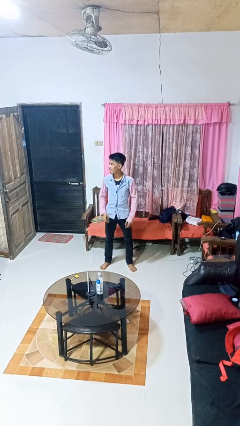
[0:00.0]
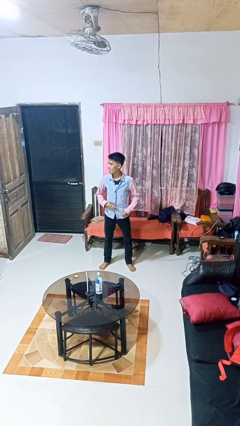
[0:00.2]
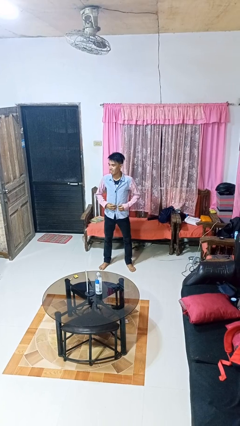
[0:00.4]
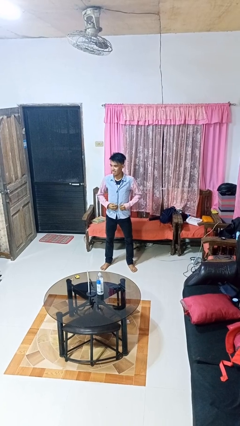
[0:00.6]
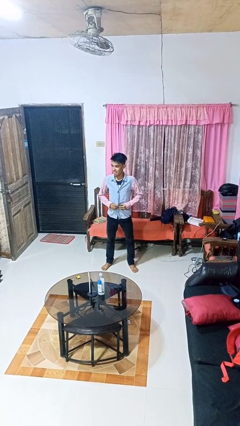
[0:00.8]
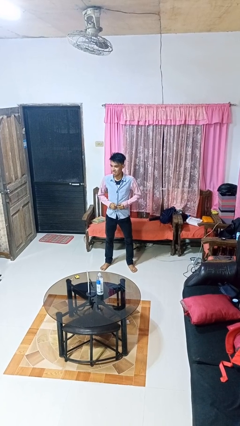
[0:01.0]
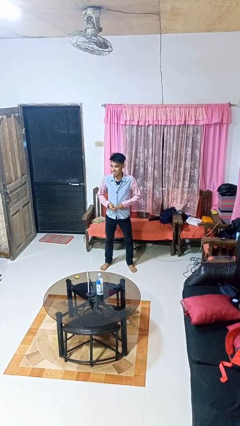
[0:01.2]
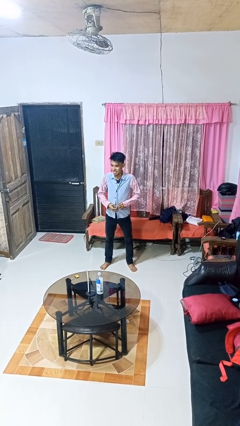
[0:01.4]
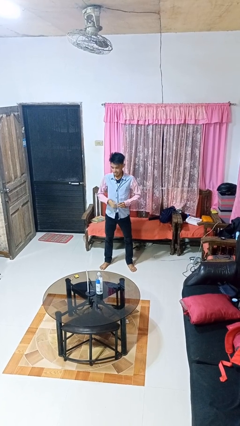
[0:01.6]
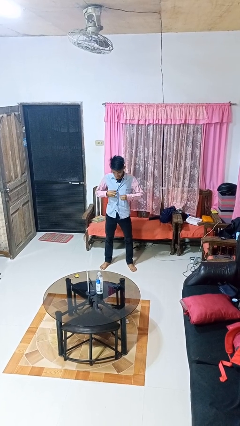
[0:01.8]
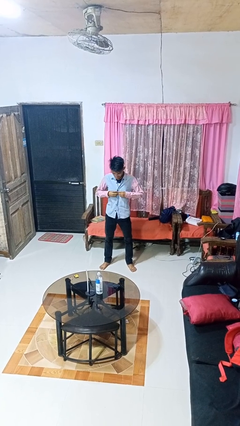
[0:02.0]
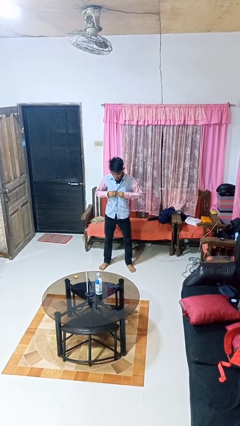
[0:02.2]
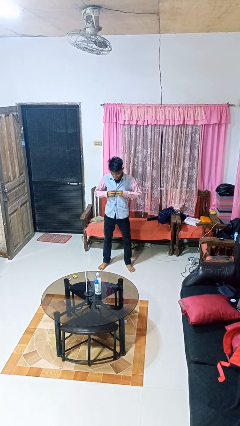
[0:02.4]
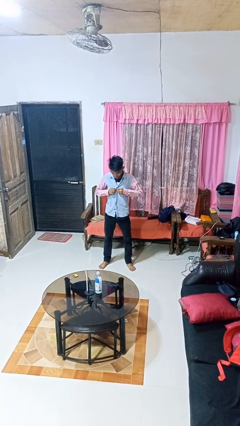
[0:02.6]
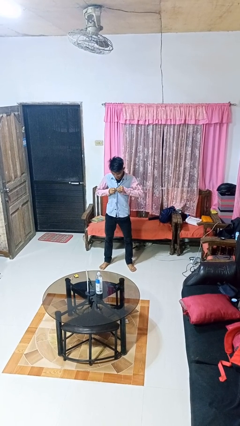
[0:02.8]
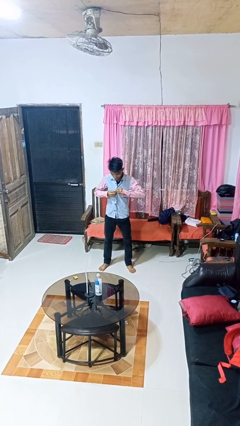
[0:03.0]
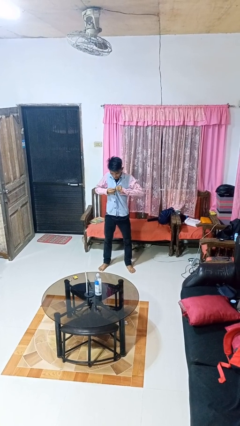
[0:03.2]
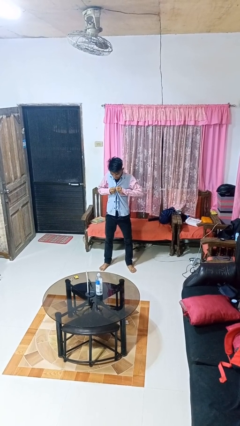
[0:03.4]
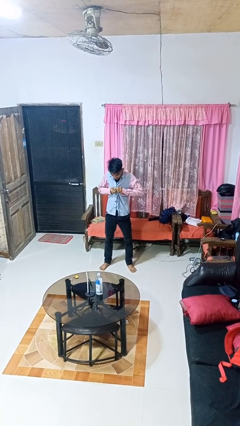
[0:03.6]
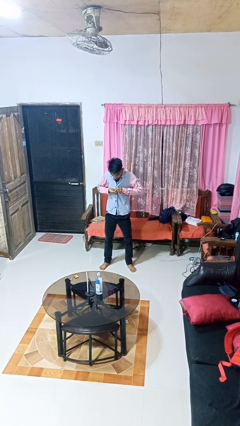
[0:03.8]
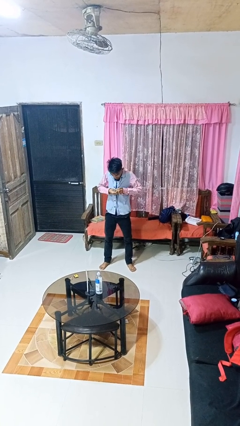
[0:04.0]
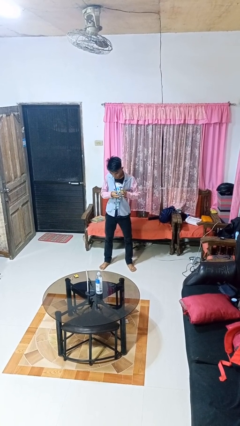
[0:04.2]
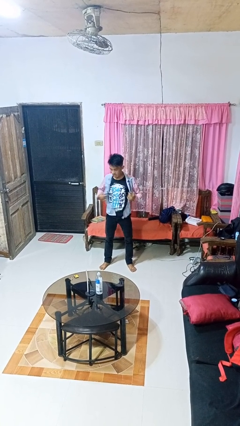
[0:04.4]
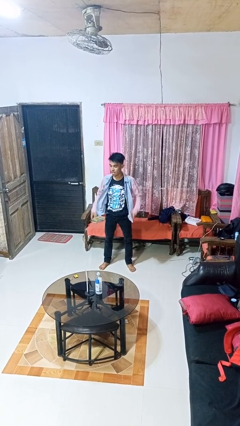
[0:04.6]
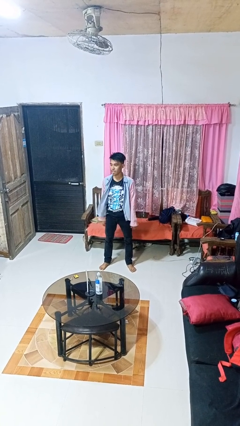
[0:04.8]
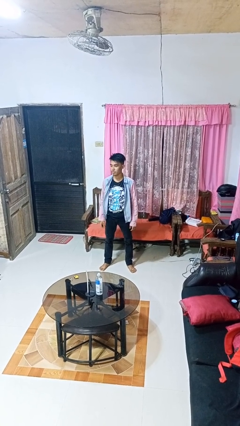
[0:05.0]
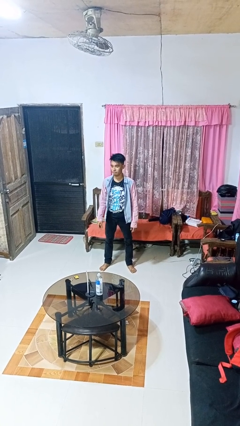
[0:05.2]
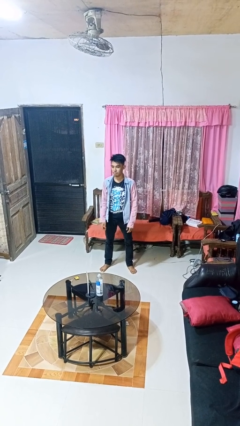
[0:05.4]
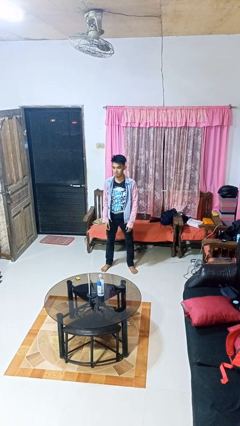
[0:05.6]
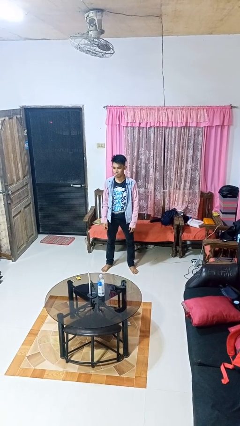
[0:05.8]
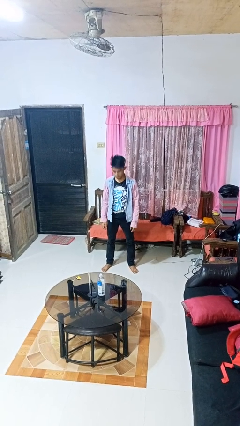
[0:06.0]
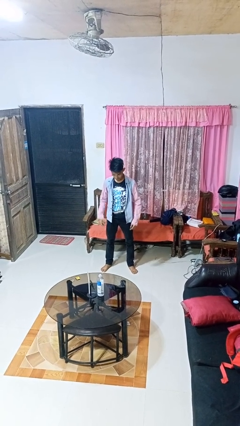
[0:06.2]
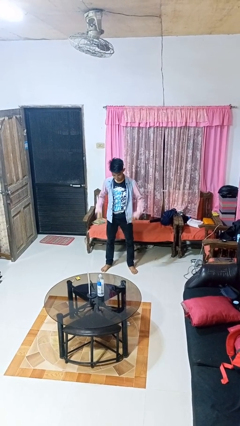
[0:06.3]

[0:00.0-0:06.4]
person unbuttons shirt

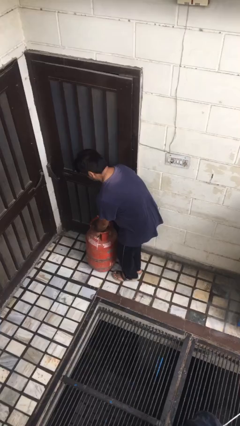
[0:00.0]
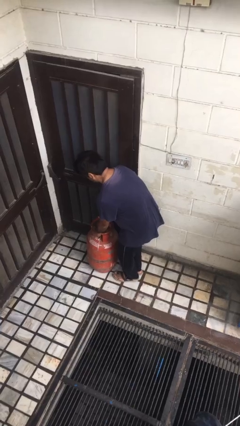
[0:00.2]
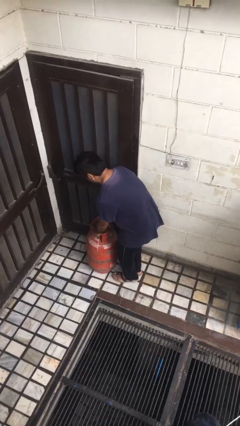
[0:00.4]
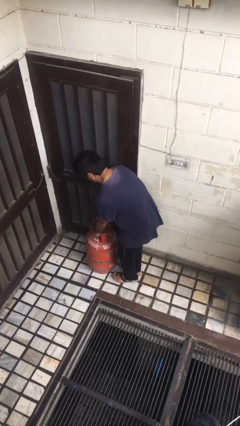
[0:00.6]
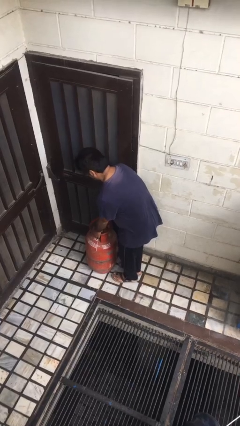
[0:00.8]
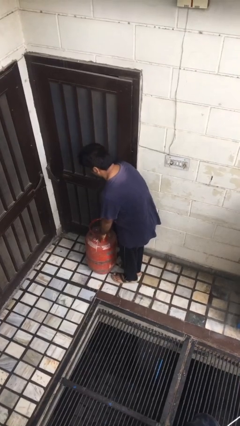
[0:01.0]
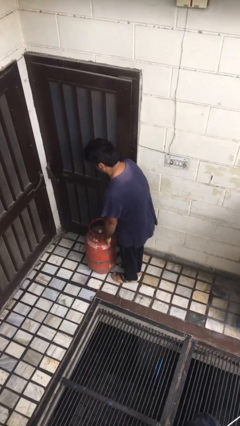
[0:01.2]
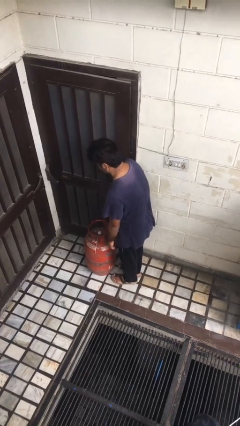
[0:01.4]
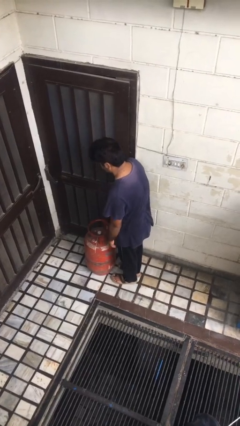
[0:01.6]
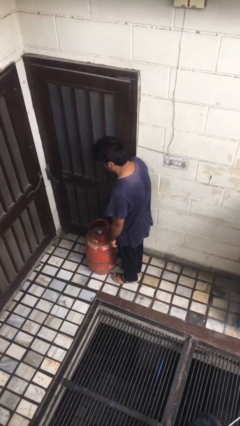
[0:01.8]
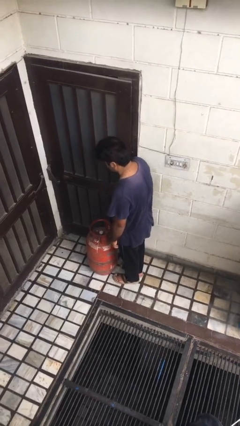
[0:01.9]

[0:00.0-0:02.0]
person puts down object on floor

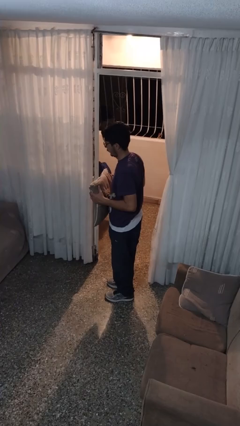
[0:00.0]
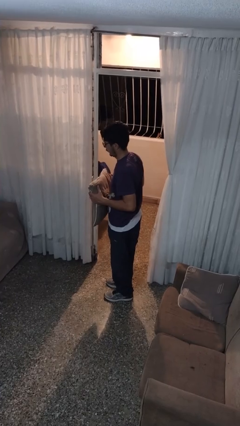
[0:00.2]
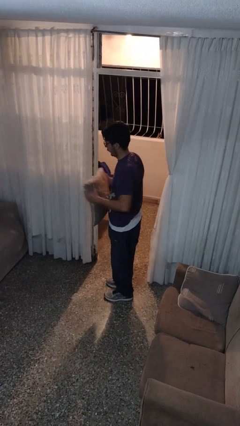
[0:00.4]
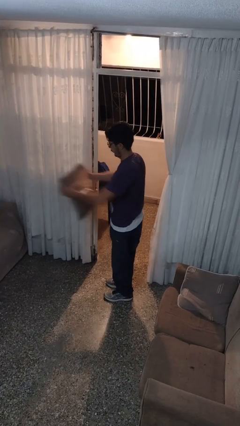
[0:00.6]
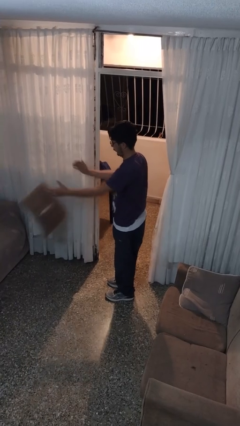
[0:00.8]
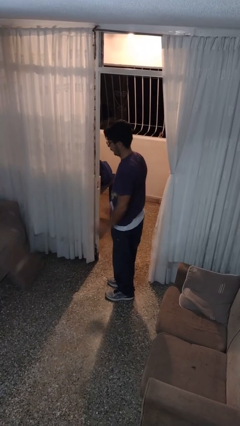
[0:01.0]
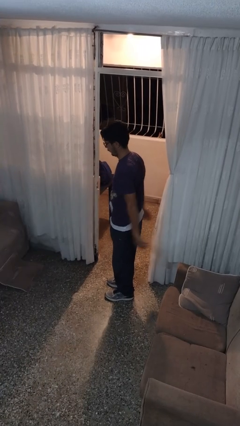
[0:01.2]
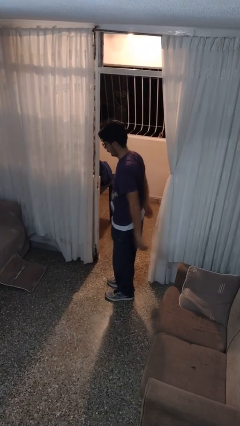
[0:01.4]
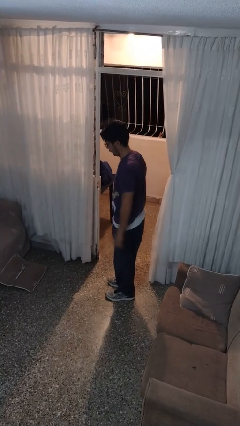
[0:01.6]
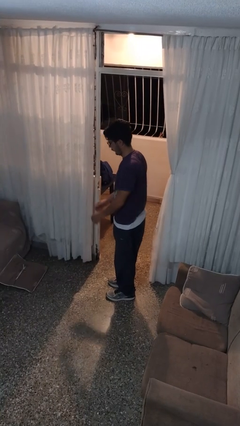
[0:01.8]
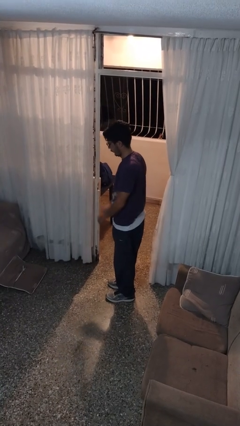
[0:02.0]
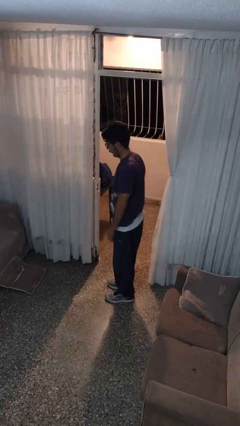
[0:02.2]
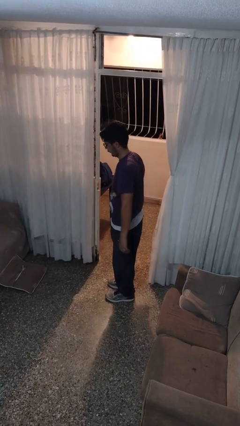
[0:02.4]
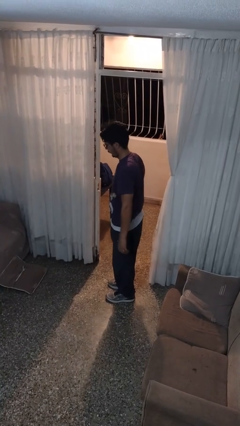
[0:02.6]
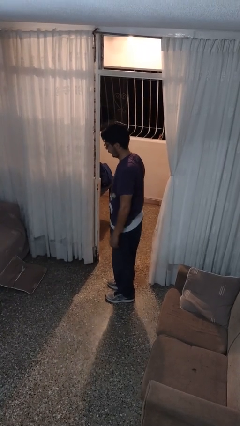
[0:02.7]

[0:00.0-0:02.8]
person throws object to ground

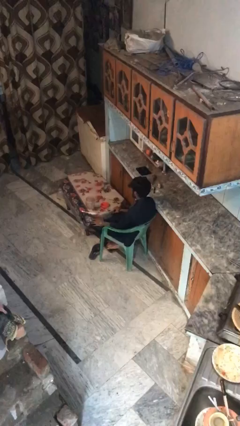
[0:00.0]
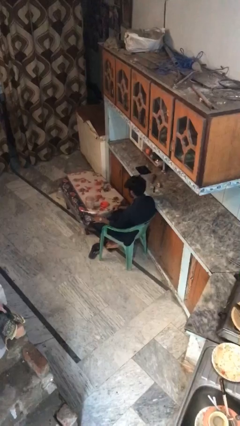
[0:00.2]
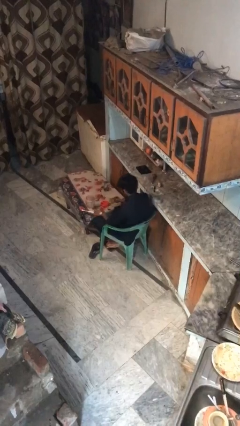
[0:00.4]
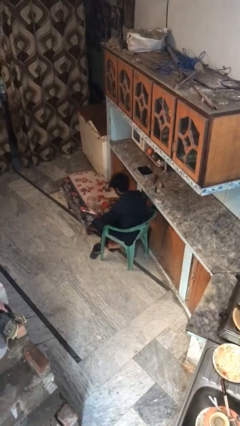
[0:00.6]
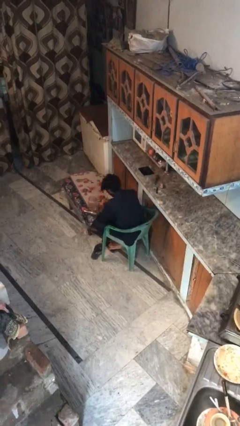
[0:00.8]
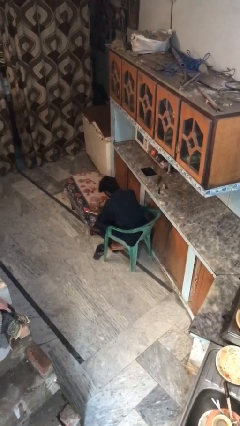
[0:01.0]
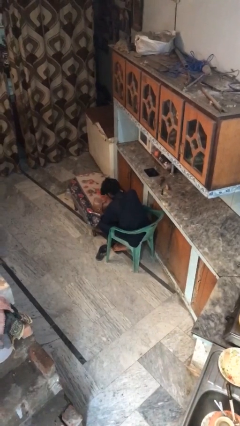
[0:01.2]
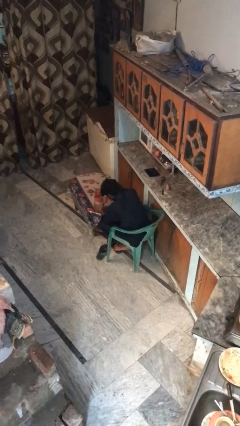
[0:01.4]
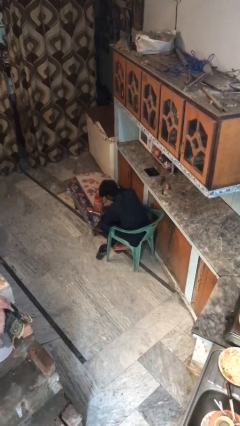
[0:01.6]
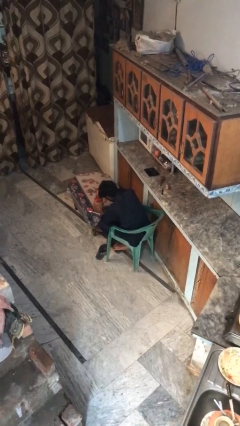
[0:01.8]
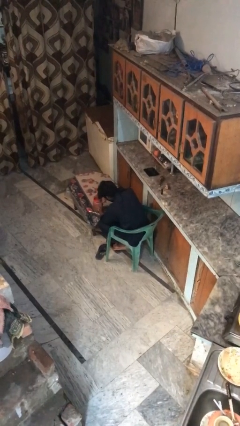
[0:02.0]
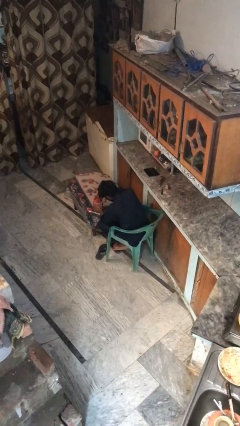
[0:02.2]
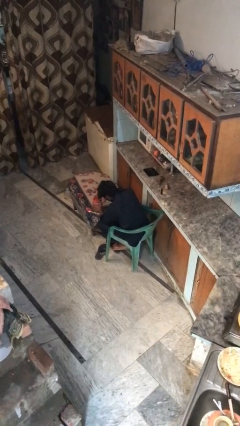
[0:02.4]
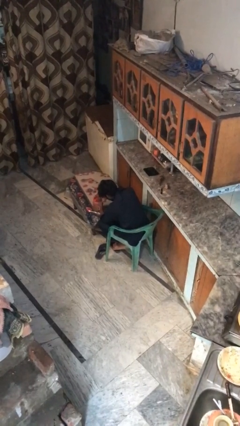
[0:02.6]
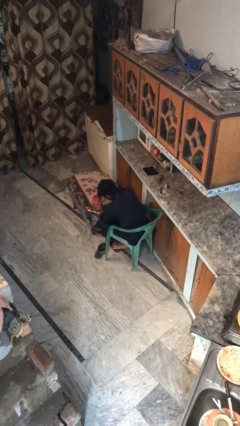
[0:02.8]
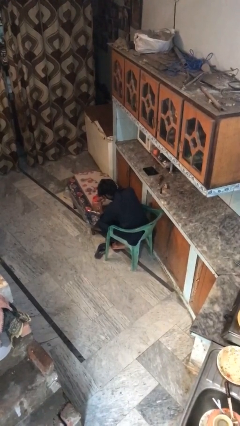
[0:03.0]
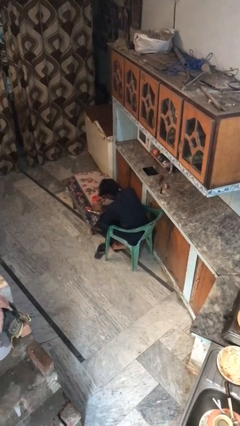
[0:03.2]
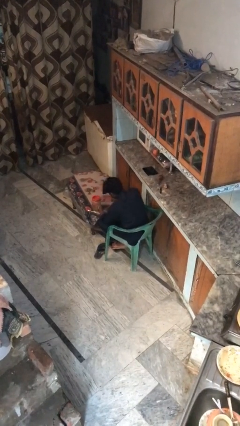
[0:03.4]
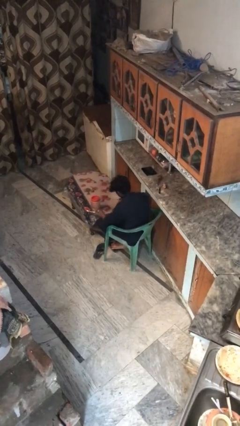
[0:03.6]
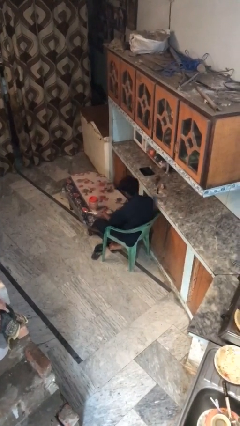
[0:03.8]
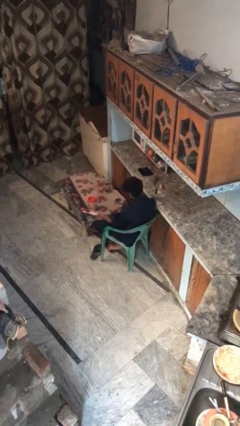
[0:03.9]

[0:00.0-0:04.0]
person closes jar

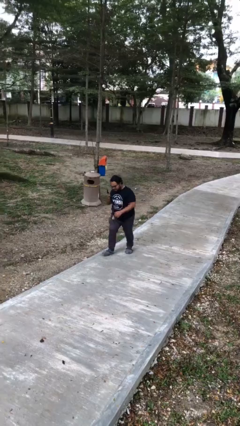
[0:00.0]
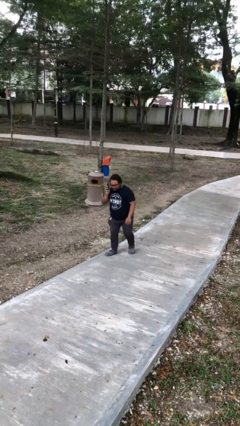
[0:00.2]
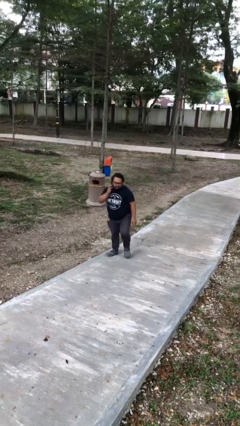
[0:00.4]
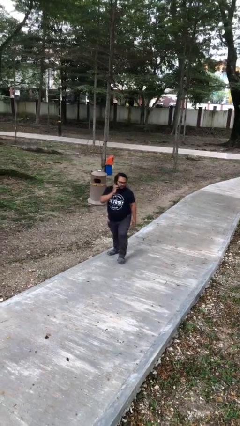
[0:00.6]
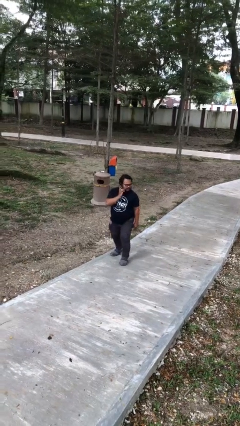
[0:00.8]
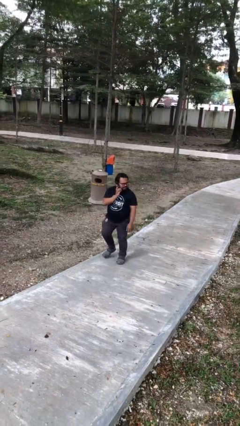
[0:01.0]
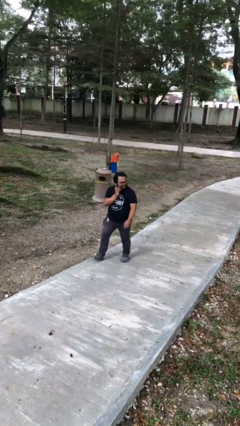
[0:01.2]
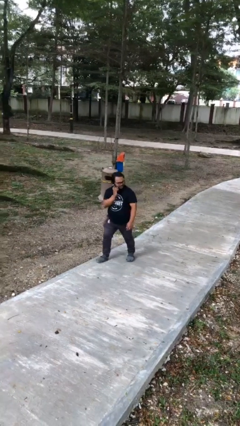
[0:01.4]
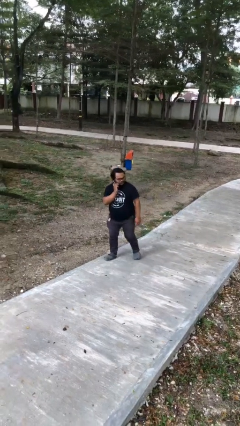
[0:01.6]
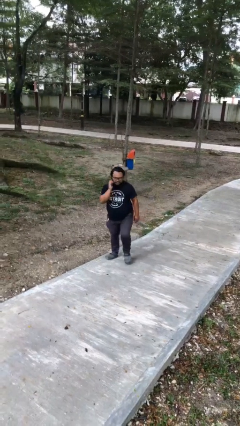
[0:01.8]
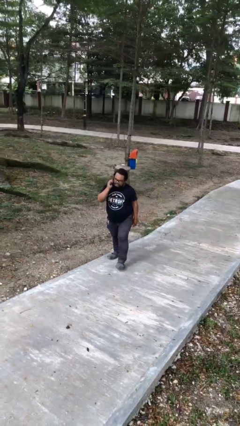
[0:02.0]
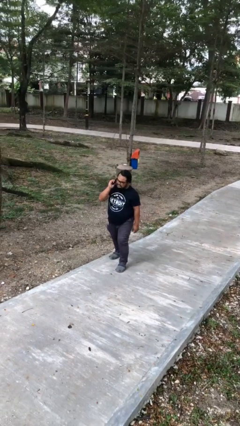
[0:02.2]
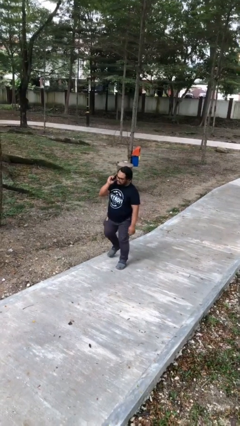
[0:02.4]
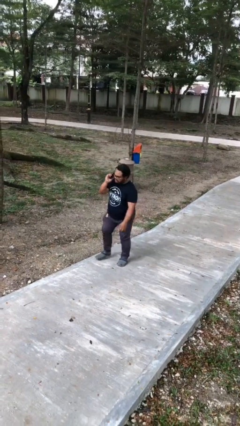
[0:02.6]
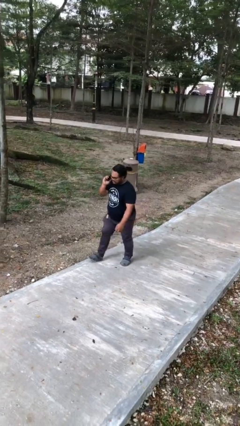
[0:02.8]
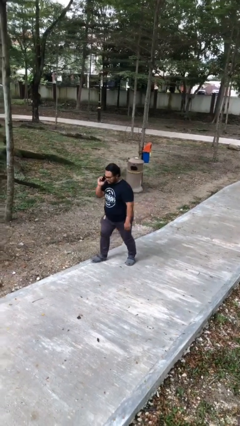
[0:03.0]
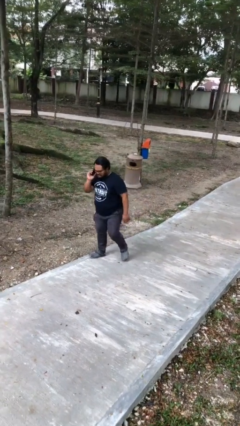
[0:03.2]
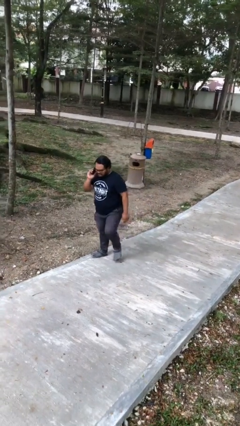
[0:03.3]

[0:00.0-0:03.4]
person talks on phone
